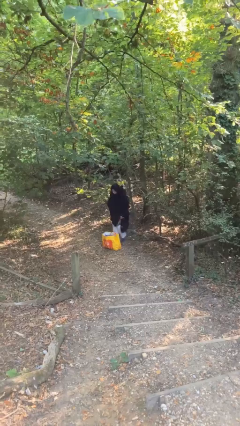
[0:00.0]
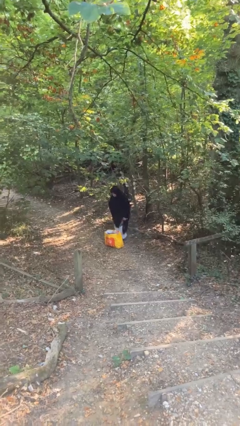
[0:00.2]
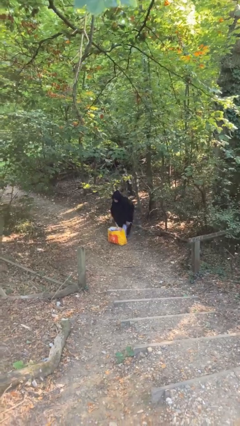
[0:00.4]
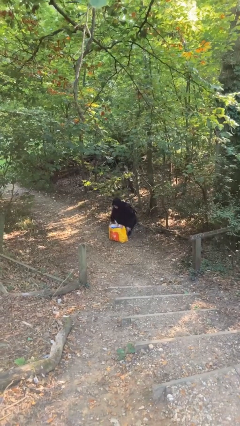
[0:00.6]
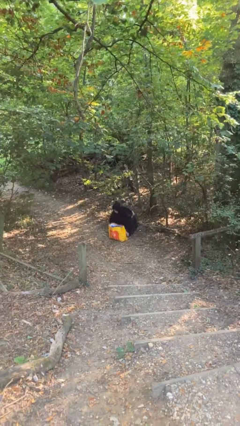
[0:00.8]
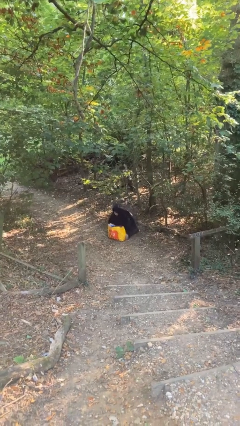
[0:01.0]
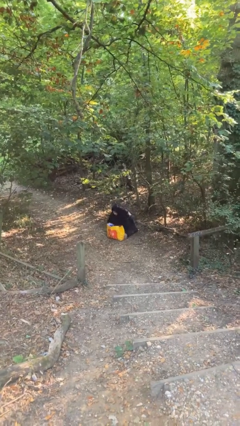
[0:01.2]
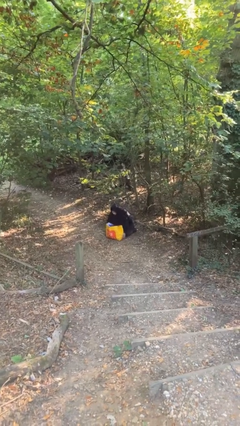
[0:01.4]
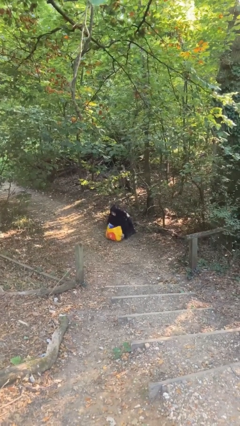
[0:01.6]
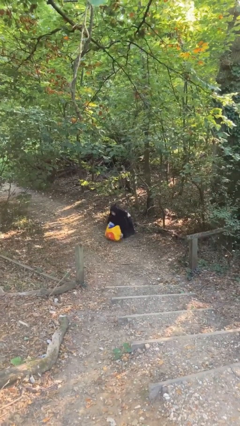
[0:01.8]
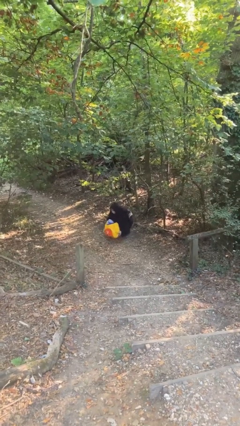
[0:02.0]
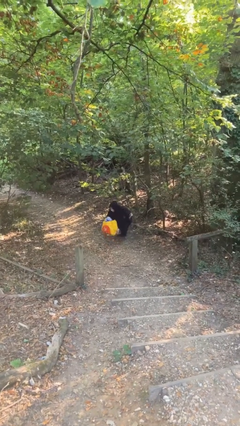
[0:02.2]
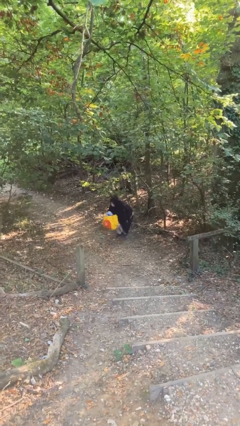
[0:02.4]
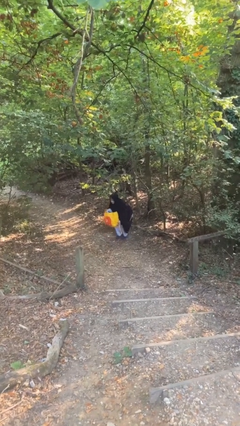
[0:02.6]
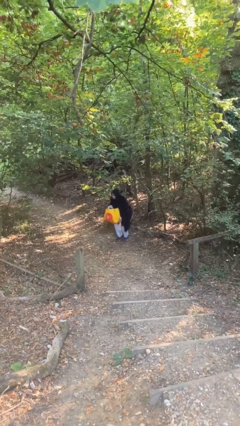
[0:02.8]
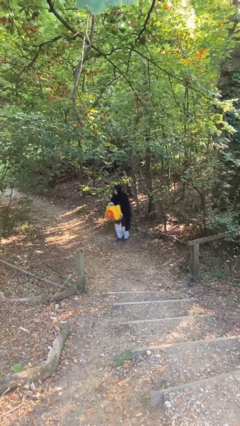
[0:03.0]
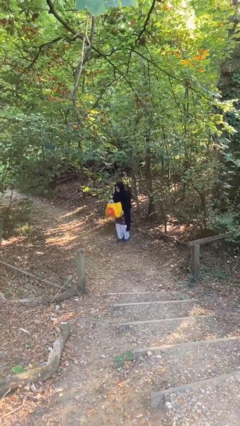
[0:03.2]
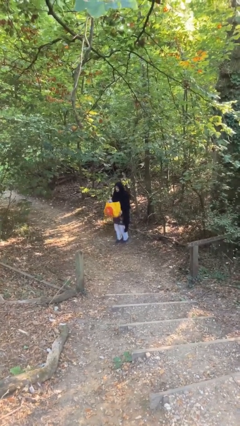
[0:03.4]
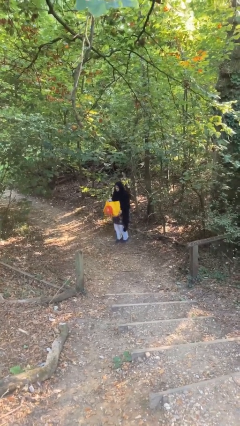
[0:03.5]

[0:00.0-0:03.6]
person picks up object from floor

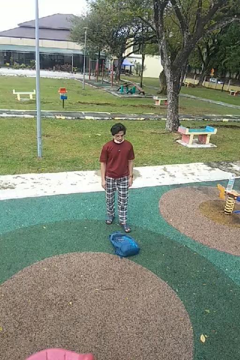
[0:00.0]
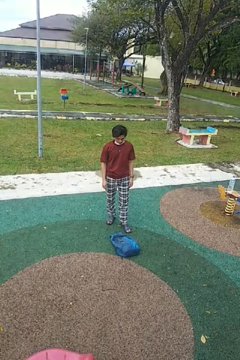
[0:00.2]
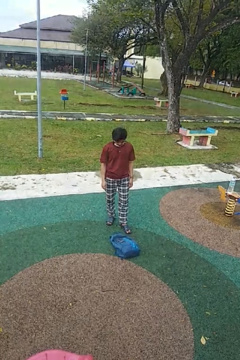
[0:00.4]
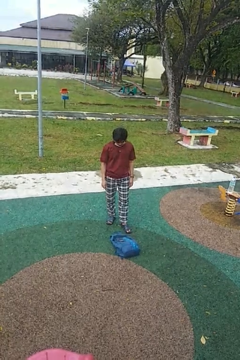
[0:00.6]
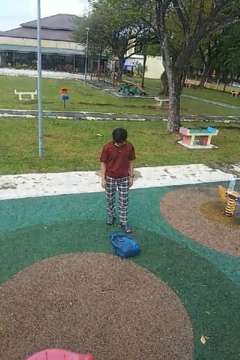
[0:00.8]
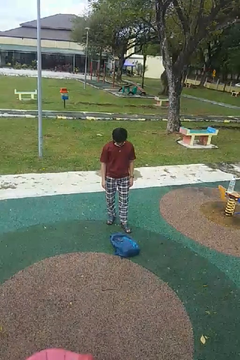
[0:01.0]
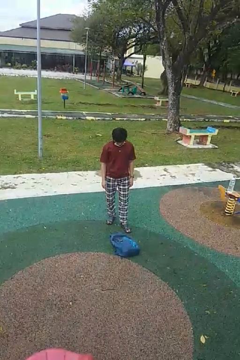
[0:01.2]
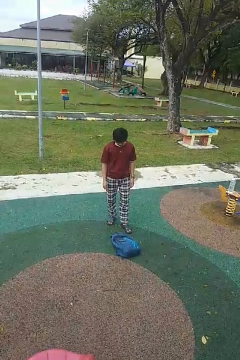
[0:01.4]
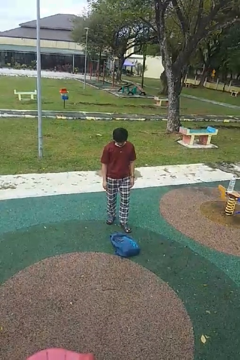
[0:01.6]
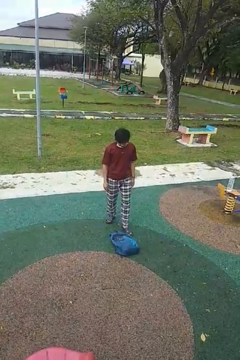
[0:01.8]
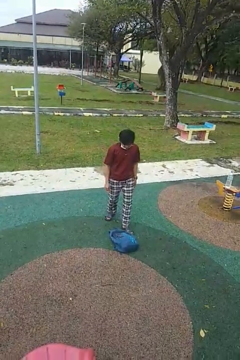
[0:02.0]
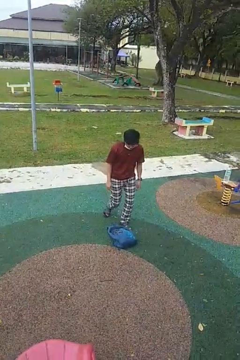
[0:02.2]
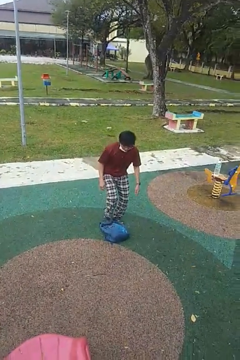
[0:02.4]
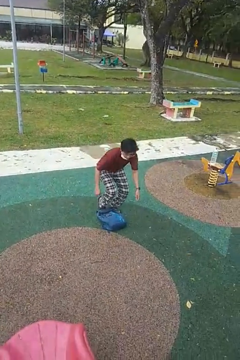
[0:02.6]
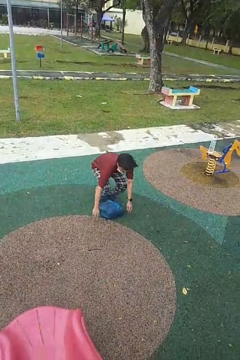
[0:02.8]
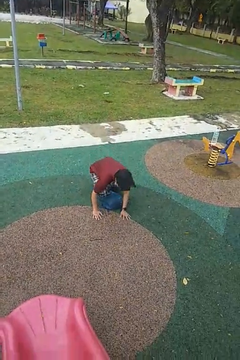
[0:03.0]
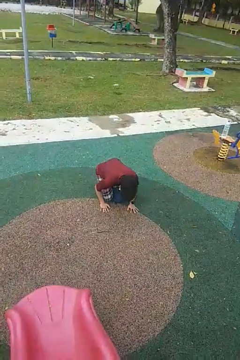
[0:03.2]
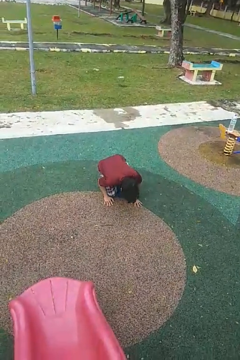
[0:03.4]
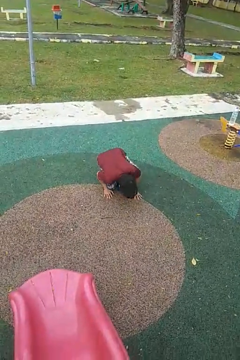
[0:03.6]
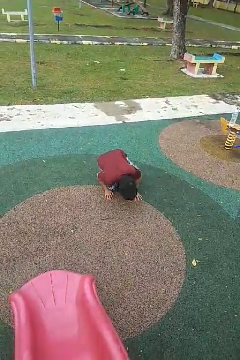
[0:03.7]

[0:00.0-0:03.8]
person trips on object on floor

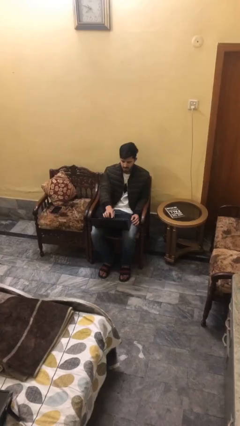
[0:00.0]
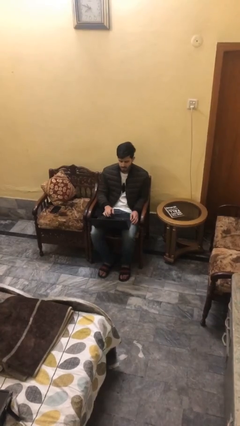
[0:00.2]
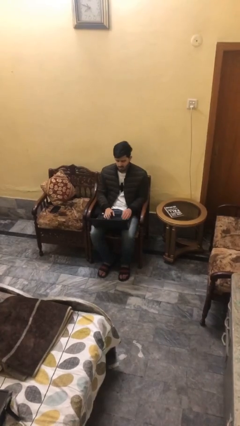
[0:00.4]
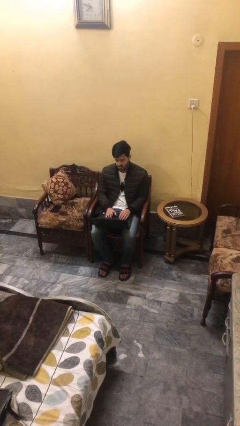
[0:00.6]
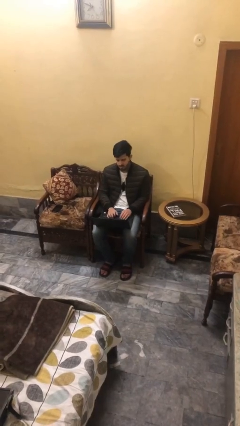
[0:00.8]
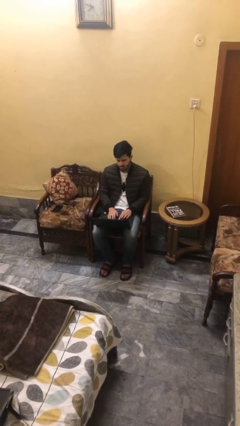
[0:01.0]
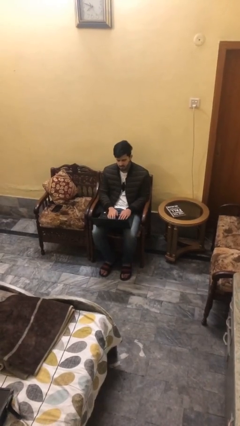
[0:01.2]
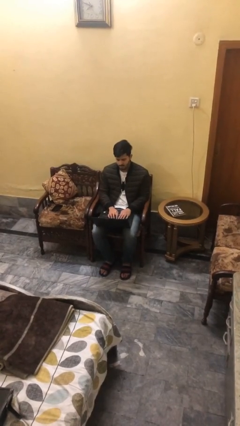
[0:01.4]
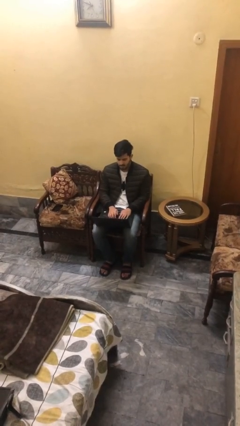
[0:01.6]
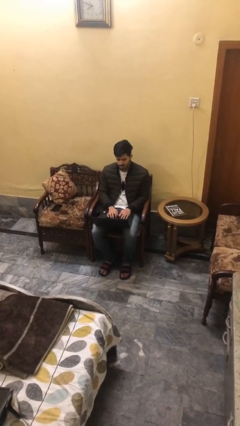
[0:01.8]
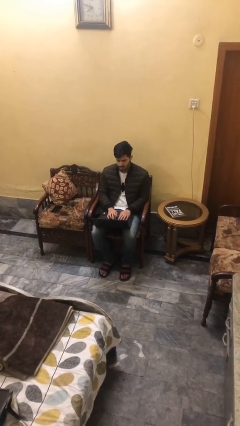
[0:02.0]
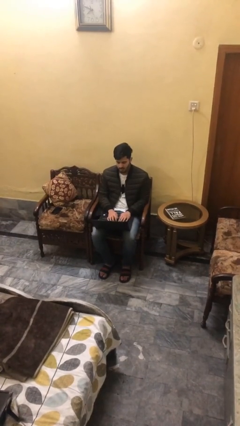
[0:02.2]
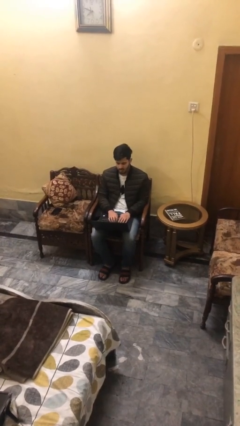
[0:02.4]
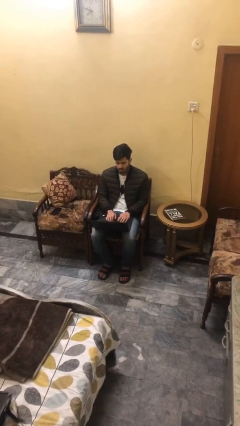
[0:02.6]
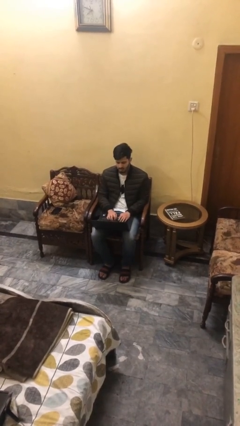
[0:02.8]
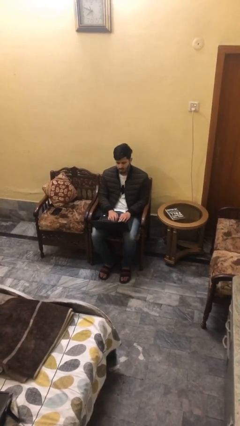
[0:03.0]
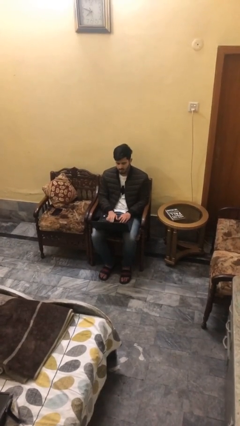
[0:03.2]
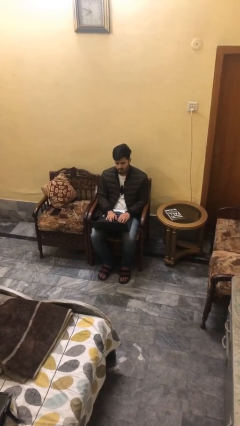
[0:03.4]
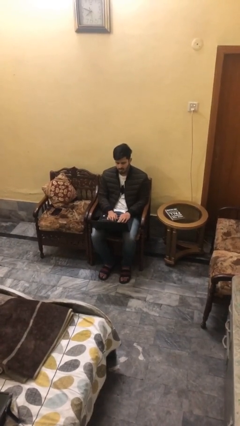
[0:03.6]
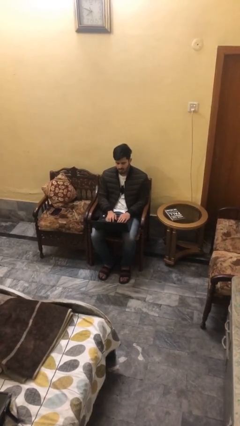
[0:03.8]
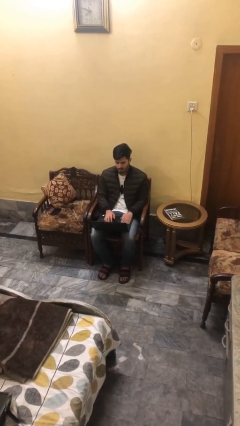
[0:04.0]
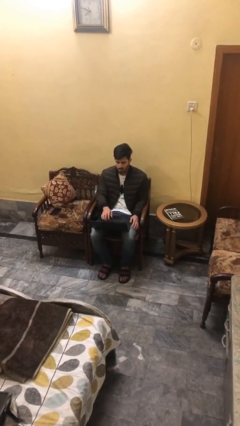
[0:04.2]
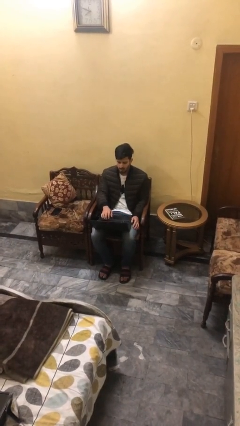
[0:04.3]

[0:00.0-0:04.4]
person interacts with laptop

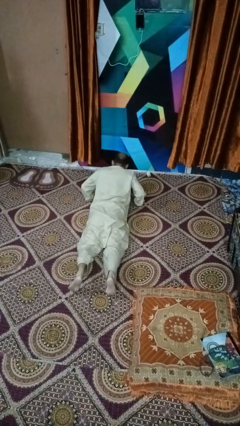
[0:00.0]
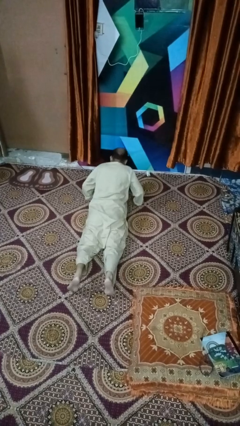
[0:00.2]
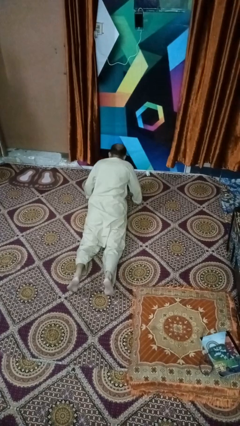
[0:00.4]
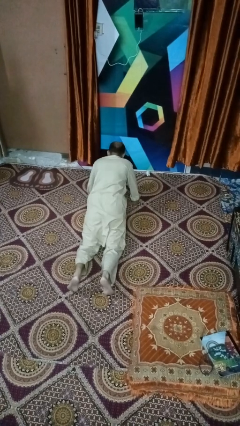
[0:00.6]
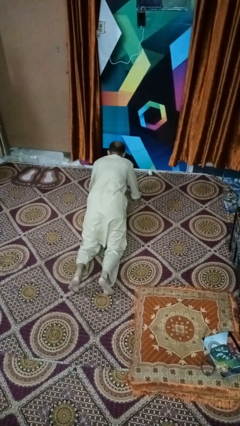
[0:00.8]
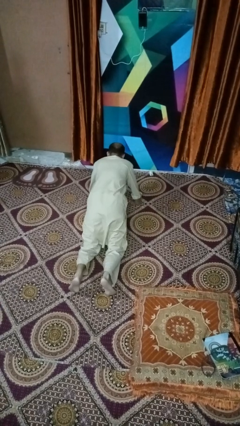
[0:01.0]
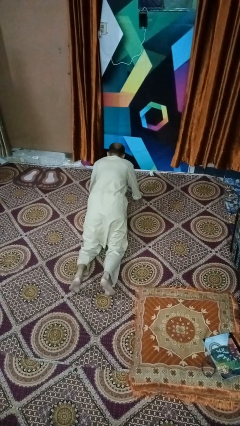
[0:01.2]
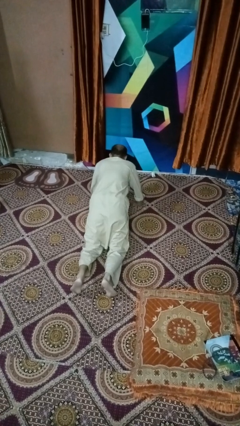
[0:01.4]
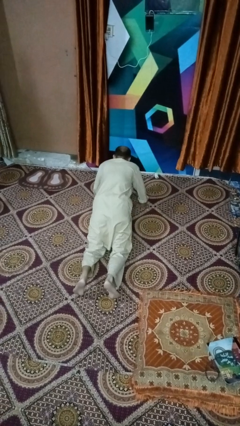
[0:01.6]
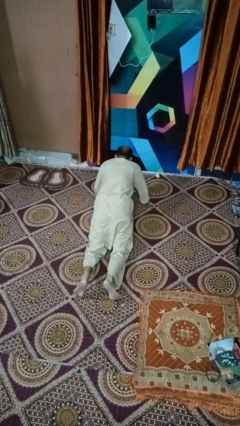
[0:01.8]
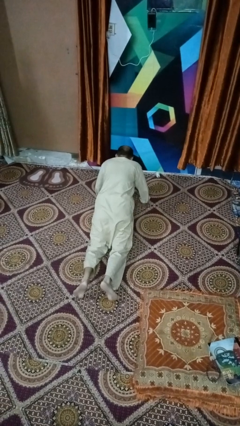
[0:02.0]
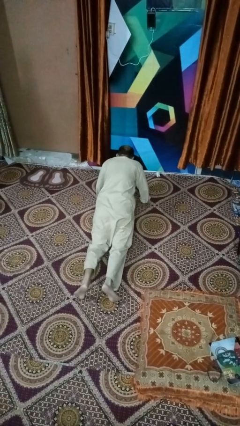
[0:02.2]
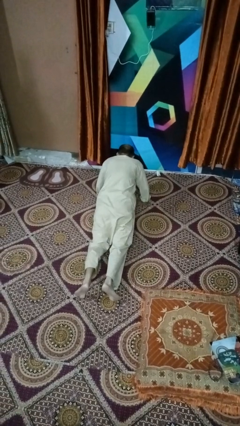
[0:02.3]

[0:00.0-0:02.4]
person exercises with situp

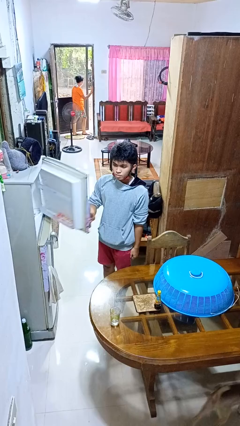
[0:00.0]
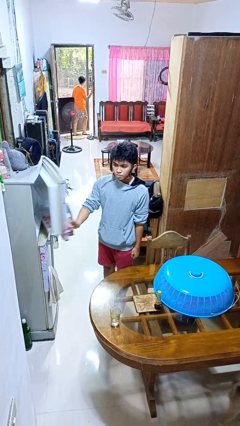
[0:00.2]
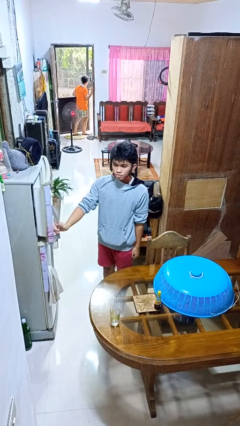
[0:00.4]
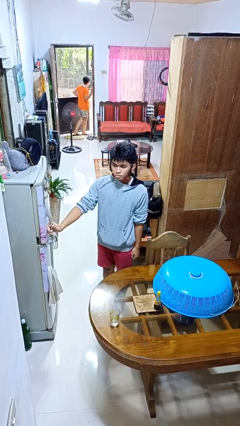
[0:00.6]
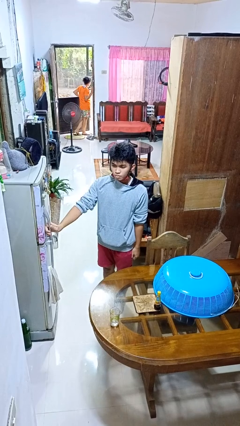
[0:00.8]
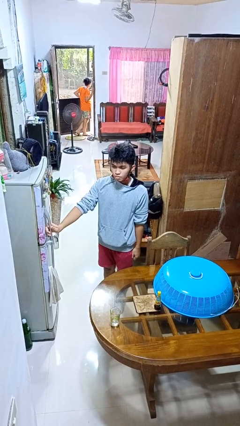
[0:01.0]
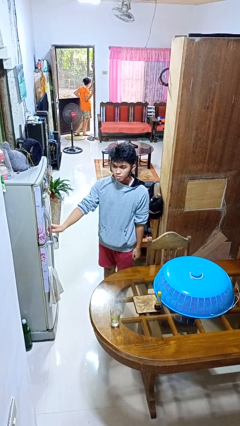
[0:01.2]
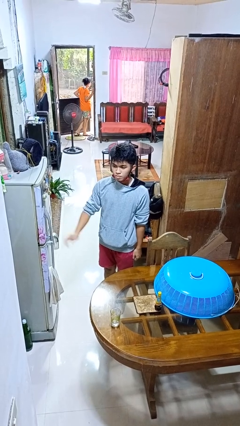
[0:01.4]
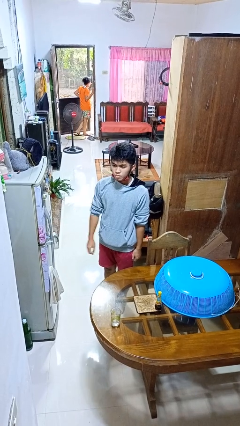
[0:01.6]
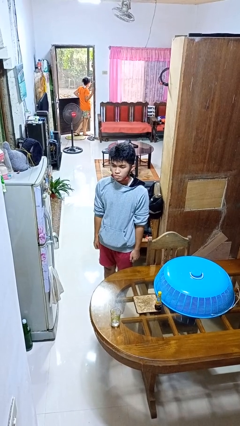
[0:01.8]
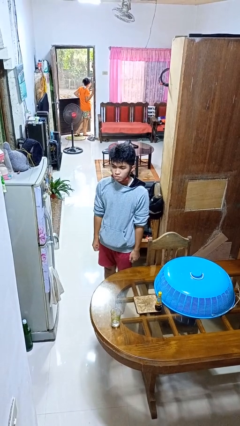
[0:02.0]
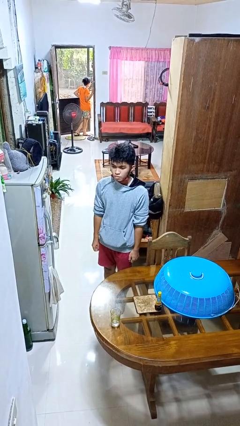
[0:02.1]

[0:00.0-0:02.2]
person closes refrigerator

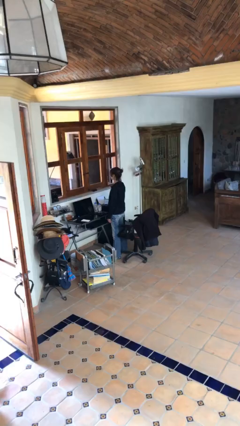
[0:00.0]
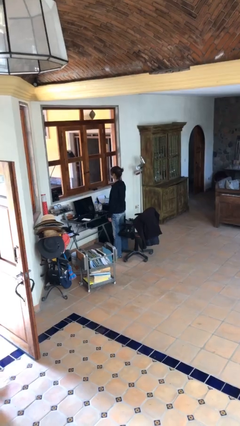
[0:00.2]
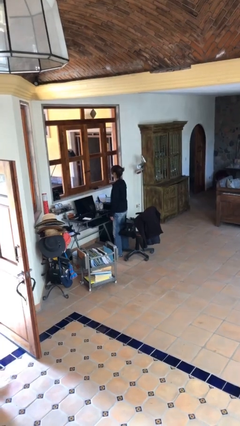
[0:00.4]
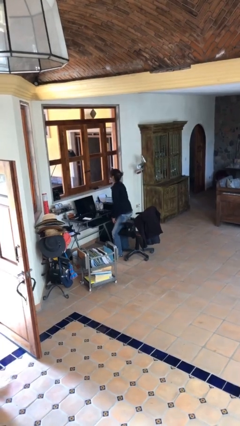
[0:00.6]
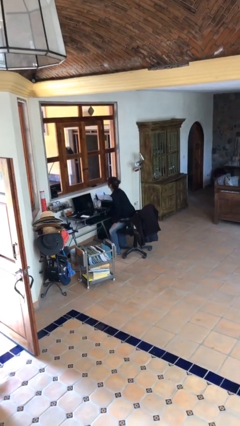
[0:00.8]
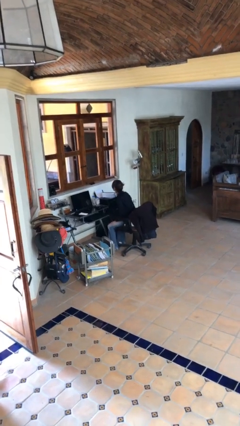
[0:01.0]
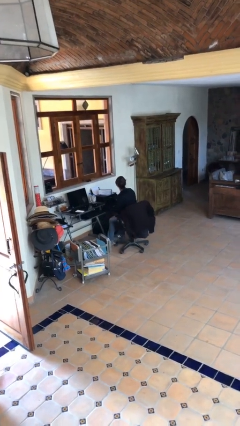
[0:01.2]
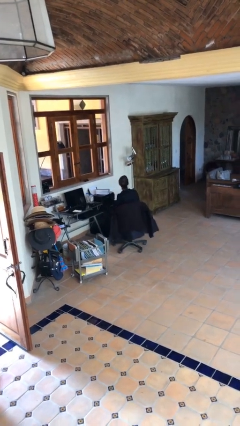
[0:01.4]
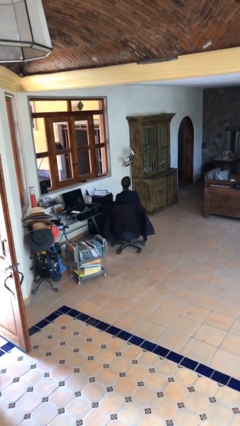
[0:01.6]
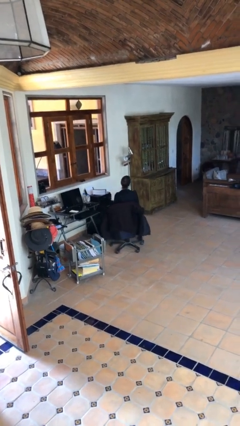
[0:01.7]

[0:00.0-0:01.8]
person sits down
